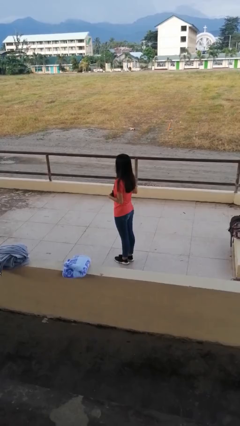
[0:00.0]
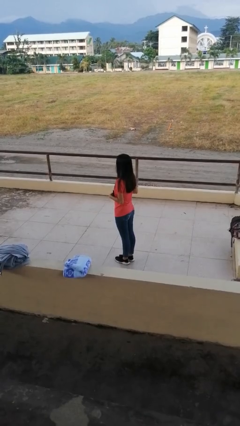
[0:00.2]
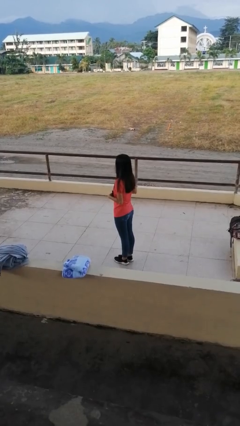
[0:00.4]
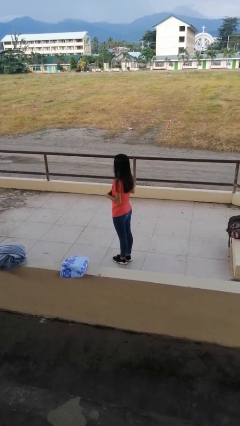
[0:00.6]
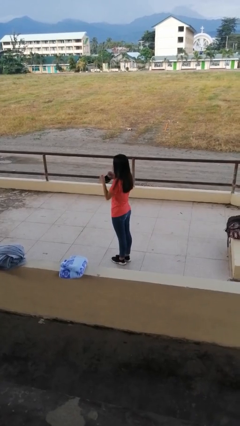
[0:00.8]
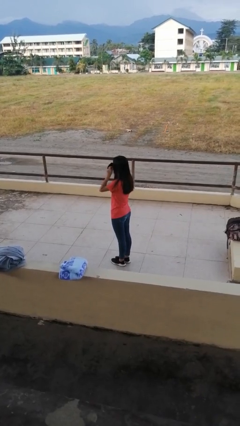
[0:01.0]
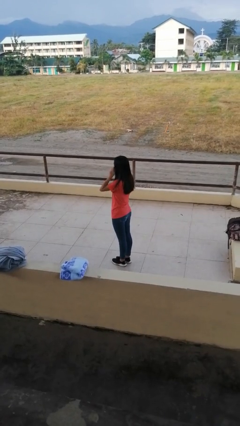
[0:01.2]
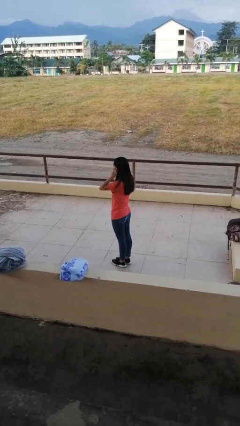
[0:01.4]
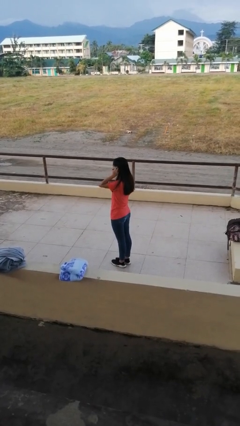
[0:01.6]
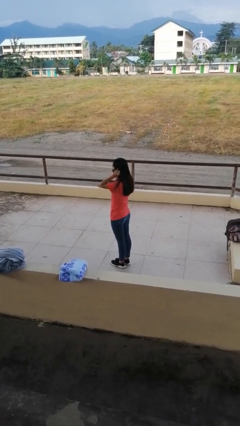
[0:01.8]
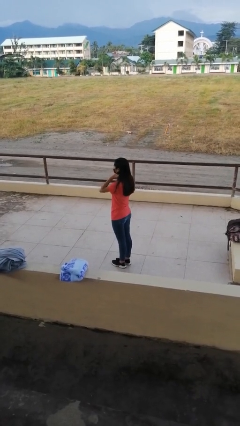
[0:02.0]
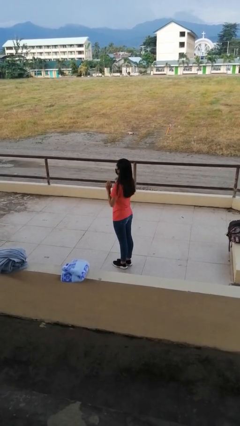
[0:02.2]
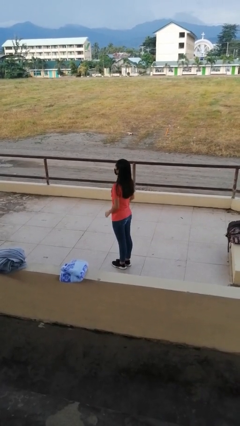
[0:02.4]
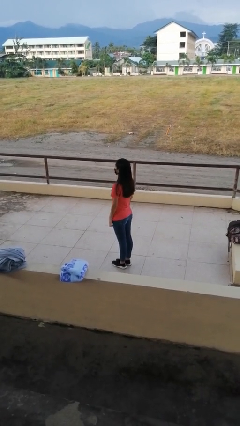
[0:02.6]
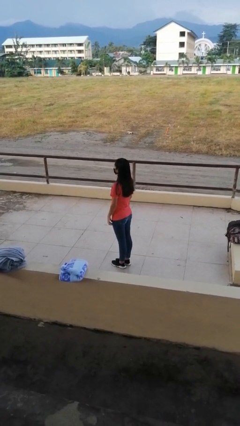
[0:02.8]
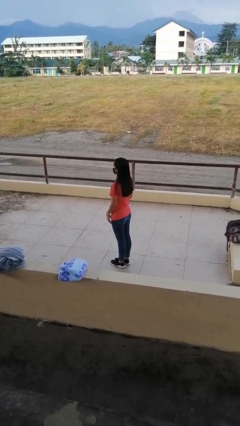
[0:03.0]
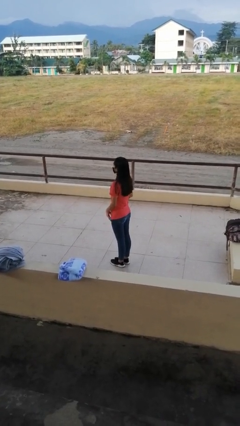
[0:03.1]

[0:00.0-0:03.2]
person puts on facemask

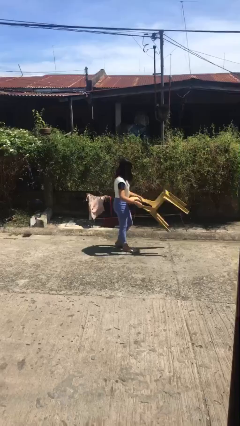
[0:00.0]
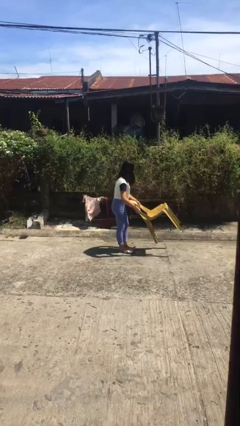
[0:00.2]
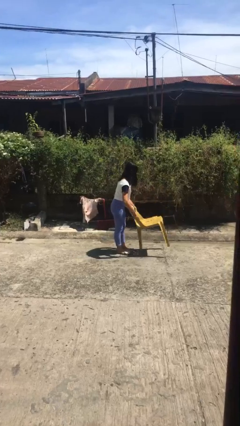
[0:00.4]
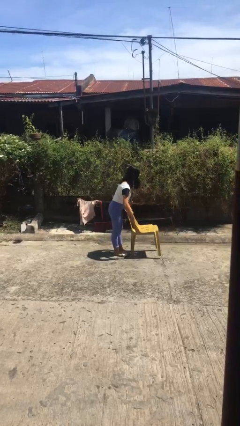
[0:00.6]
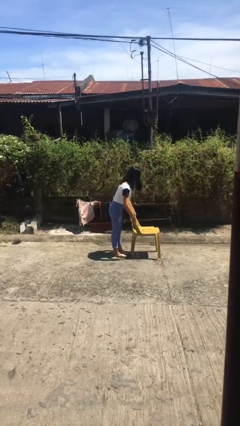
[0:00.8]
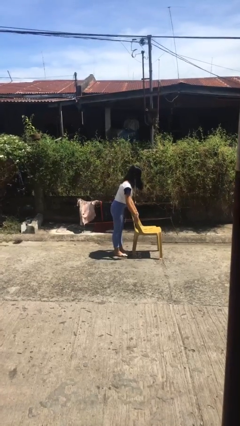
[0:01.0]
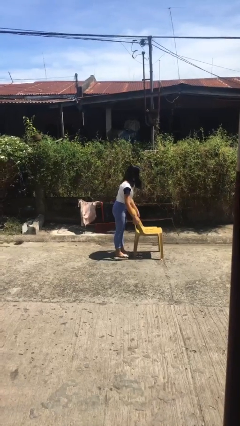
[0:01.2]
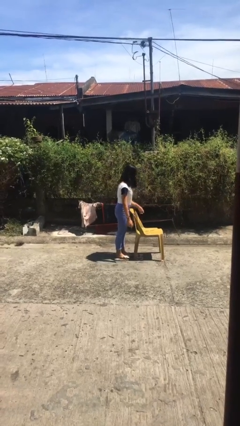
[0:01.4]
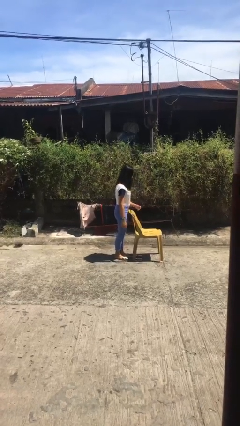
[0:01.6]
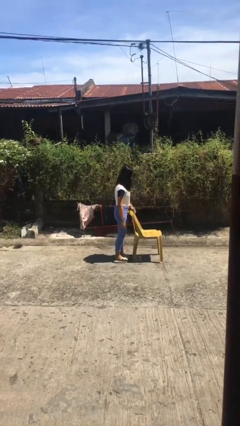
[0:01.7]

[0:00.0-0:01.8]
person puts down object on floor

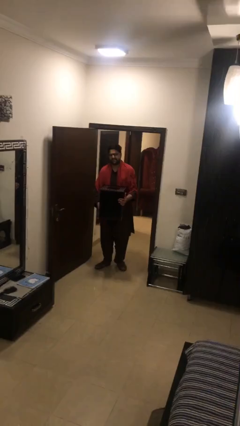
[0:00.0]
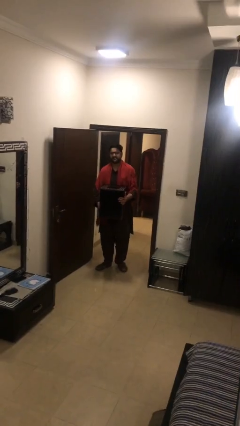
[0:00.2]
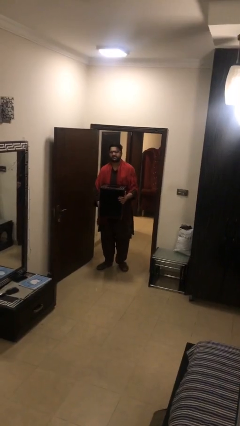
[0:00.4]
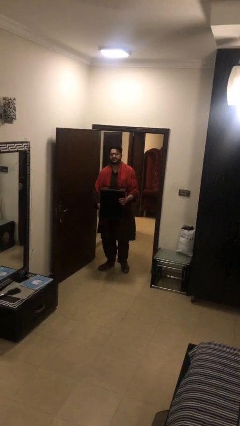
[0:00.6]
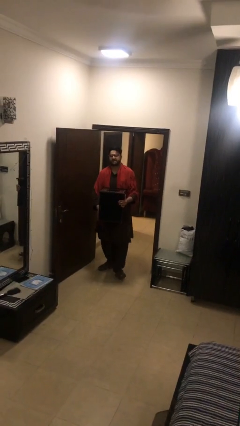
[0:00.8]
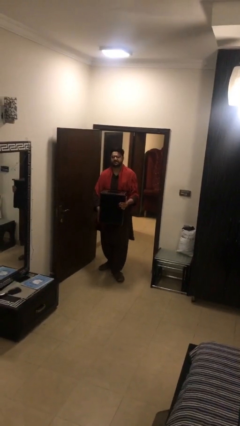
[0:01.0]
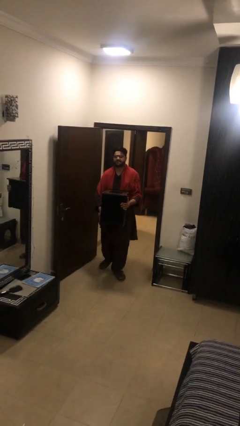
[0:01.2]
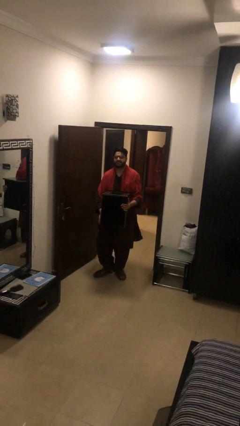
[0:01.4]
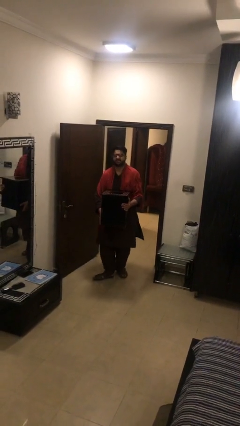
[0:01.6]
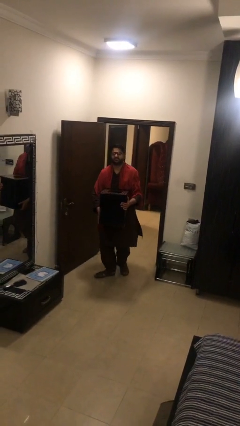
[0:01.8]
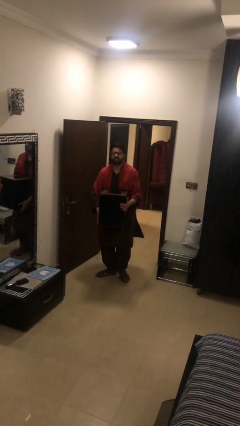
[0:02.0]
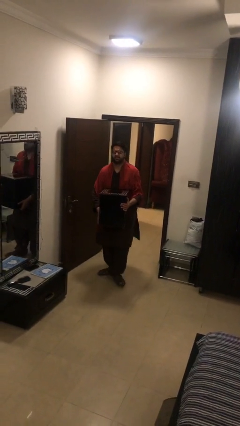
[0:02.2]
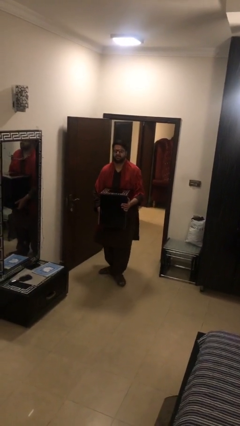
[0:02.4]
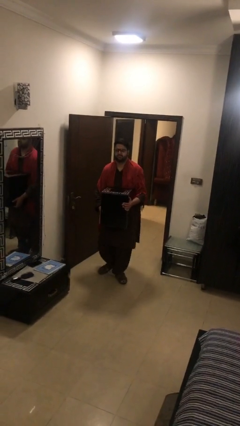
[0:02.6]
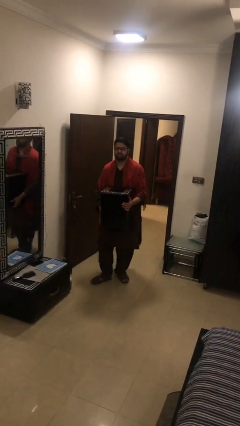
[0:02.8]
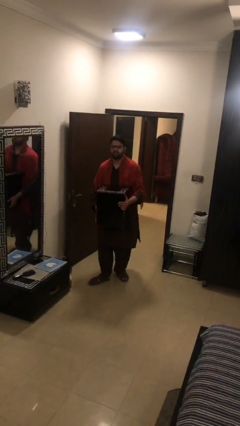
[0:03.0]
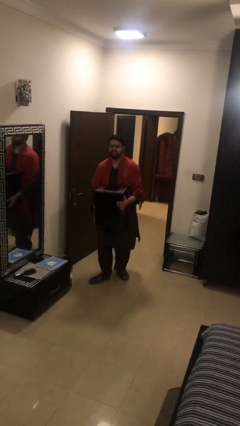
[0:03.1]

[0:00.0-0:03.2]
person carries heavy object

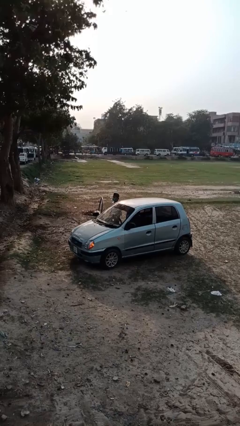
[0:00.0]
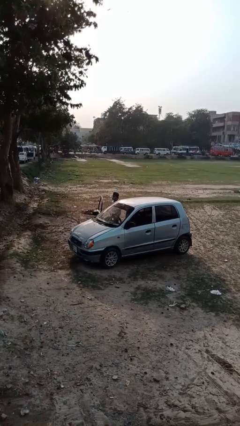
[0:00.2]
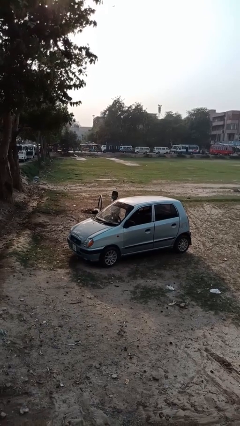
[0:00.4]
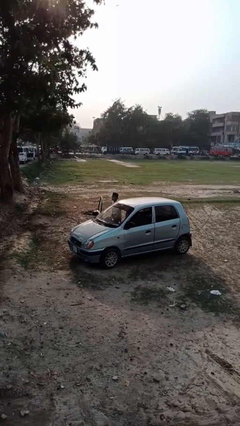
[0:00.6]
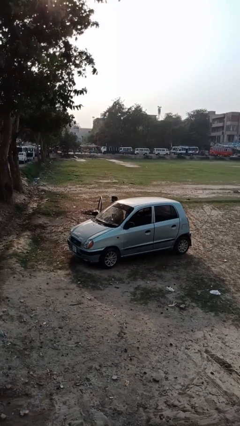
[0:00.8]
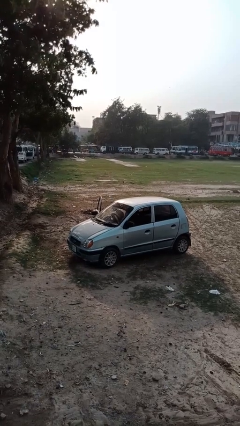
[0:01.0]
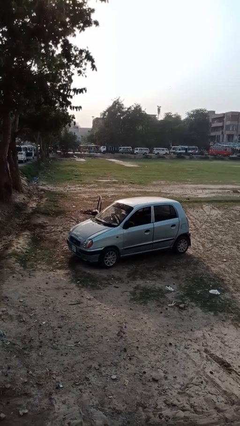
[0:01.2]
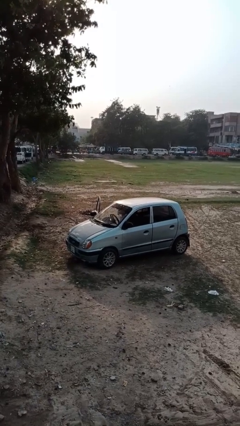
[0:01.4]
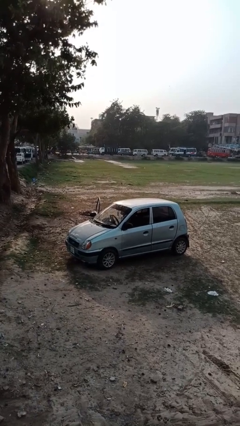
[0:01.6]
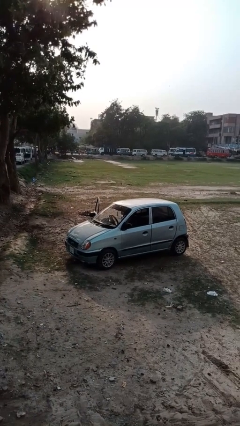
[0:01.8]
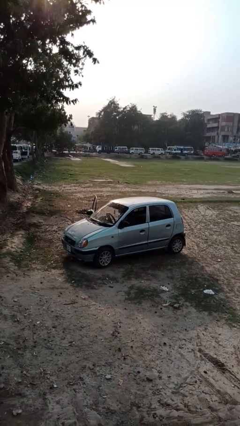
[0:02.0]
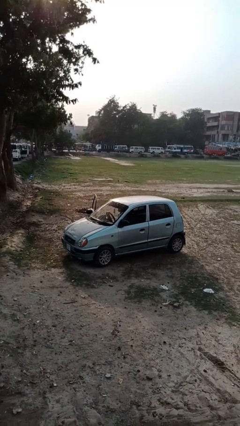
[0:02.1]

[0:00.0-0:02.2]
person enters car

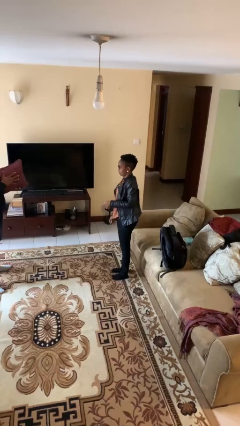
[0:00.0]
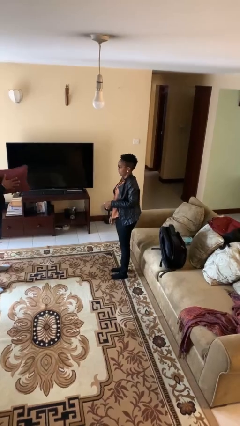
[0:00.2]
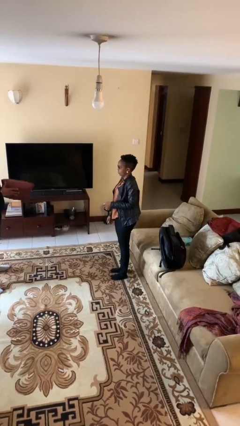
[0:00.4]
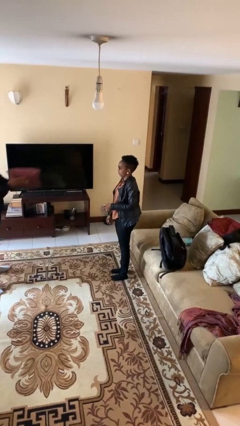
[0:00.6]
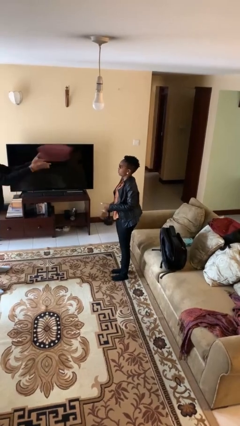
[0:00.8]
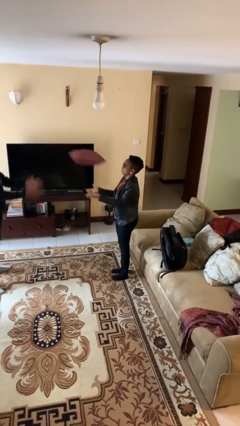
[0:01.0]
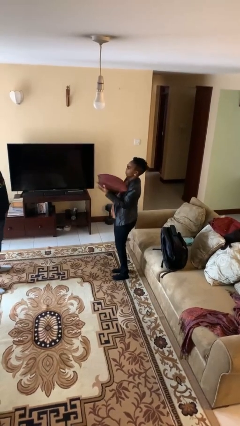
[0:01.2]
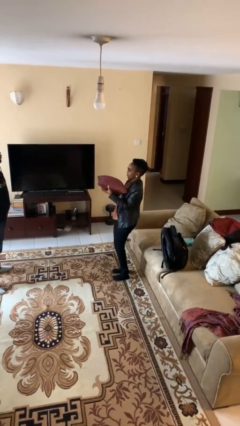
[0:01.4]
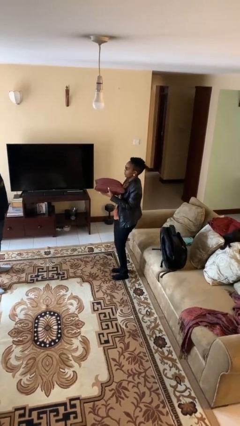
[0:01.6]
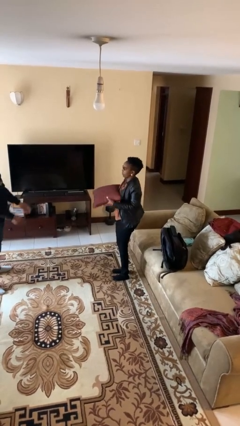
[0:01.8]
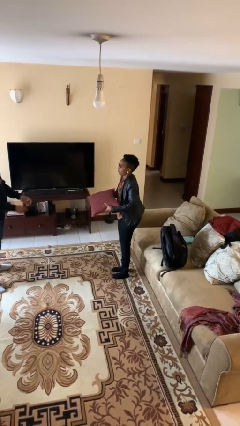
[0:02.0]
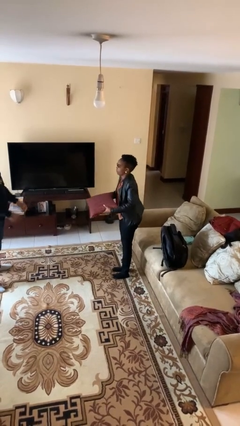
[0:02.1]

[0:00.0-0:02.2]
person catches object from person

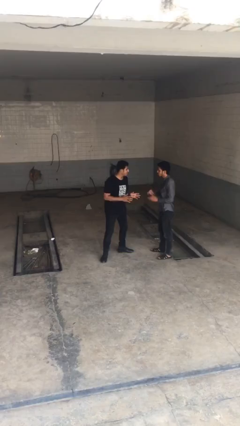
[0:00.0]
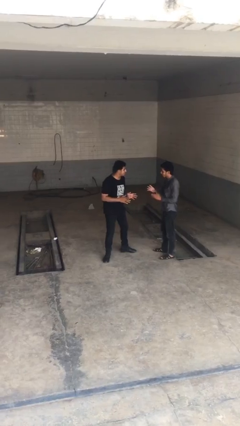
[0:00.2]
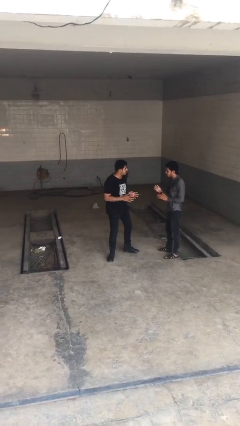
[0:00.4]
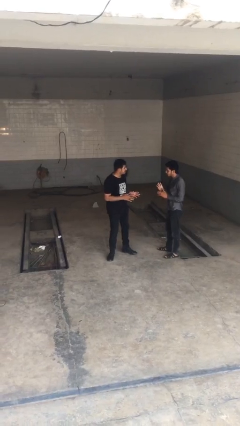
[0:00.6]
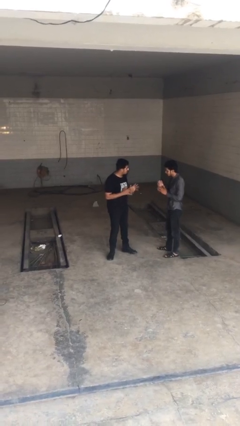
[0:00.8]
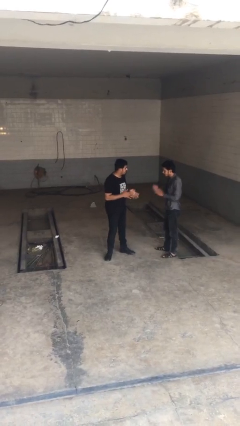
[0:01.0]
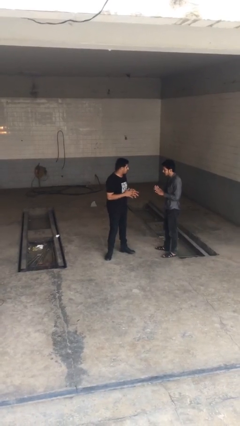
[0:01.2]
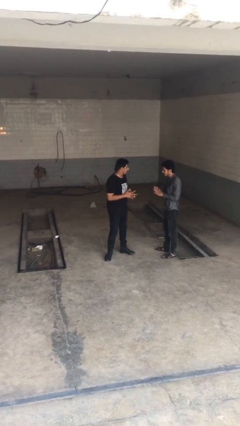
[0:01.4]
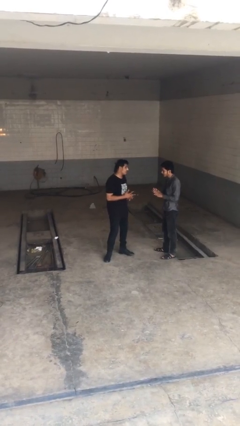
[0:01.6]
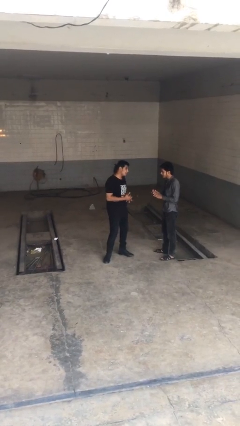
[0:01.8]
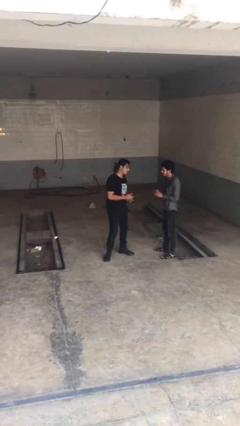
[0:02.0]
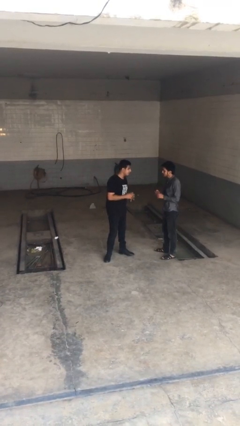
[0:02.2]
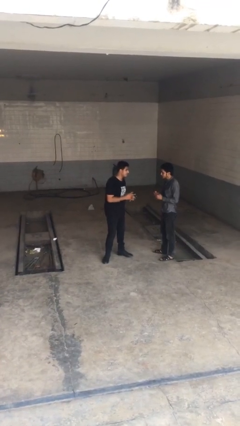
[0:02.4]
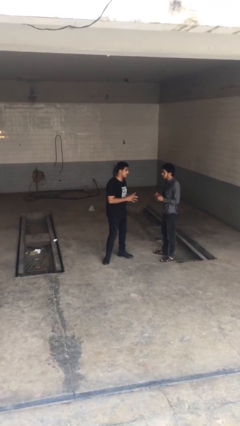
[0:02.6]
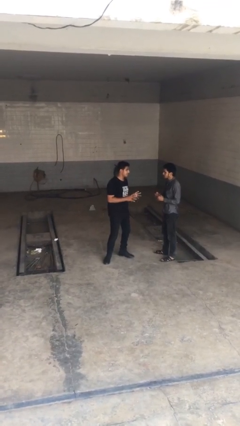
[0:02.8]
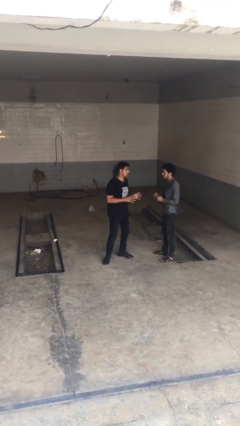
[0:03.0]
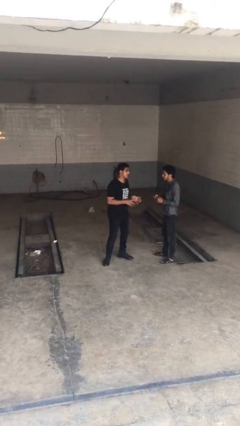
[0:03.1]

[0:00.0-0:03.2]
person talks to person

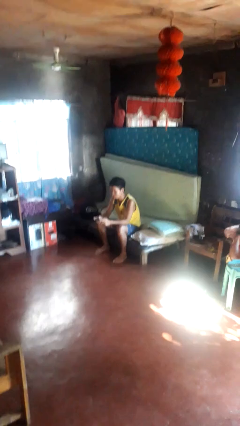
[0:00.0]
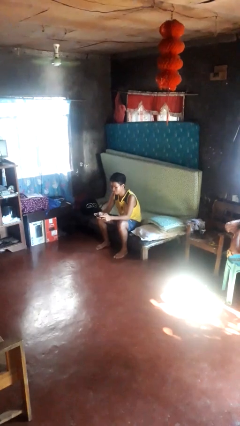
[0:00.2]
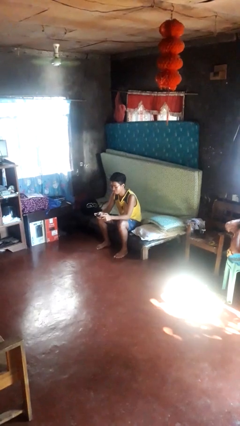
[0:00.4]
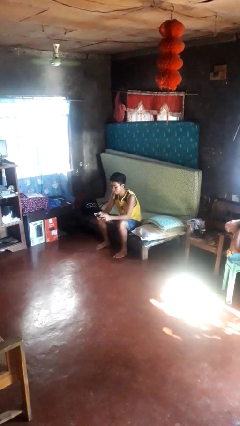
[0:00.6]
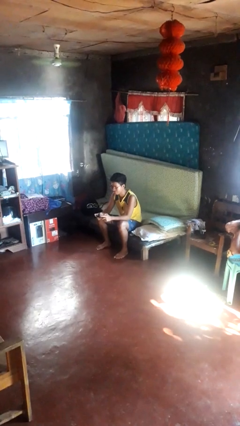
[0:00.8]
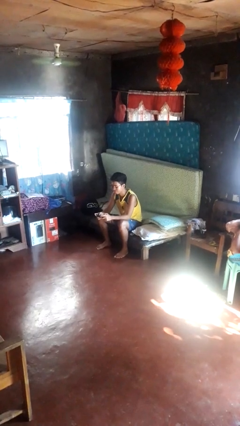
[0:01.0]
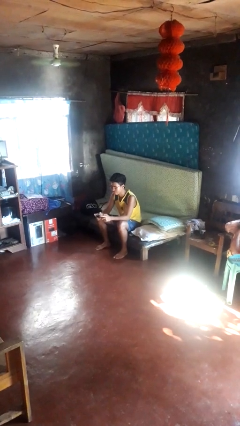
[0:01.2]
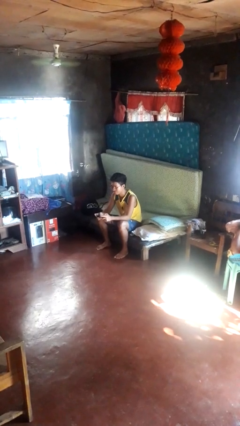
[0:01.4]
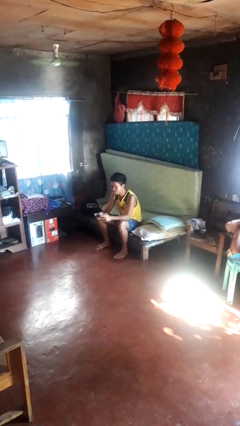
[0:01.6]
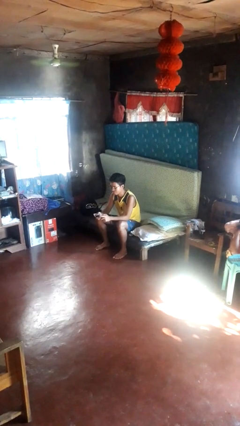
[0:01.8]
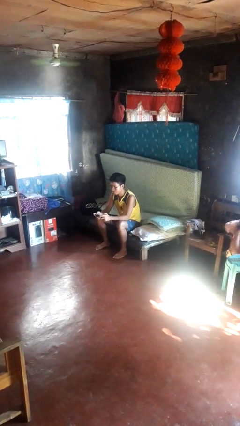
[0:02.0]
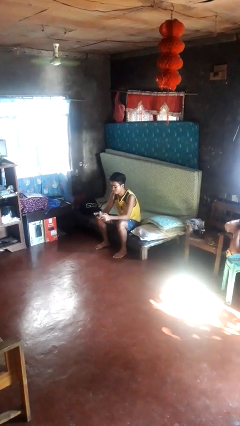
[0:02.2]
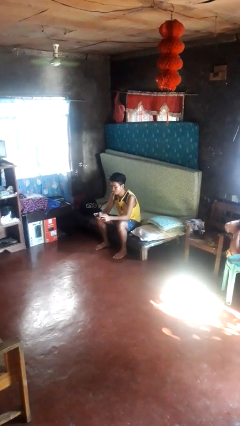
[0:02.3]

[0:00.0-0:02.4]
person interacts with handheld game
